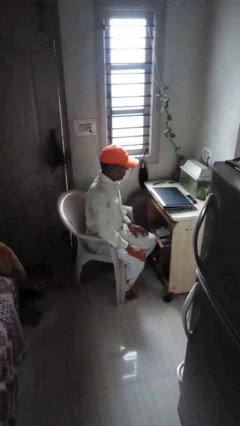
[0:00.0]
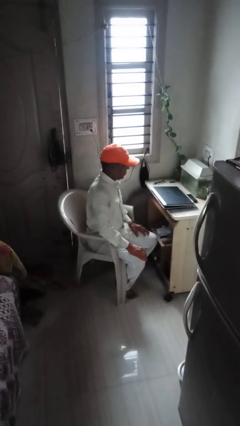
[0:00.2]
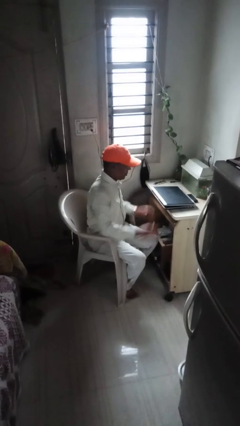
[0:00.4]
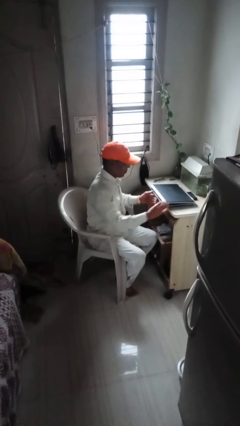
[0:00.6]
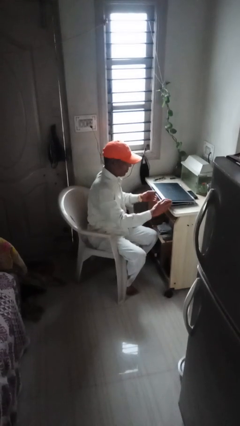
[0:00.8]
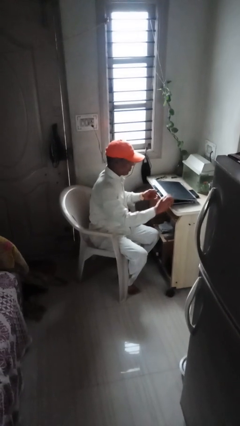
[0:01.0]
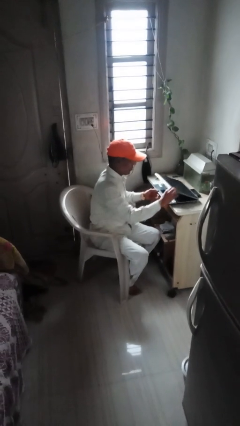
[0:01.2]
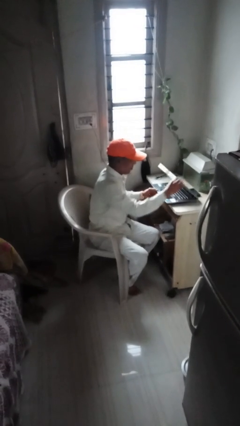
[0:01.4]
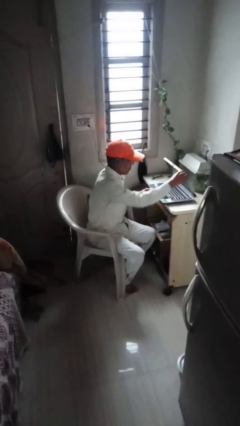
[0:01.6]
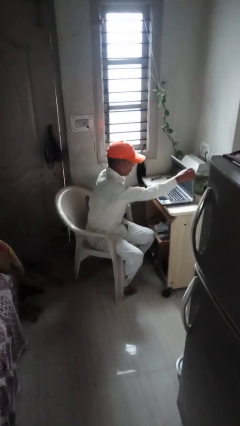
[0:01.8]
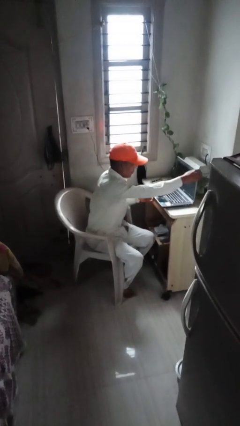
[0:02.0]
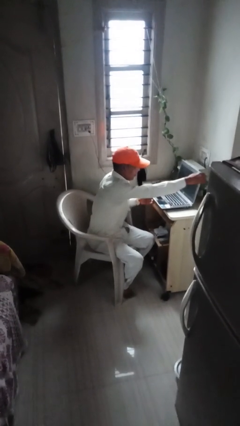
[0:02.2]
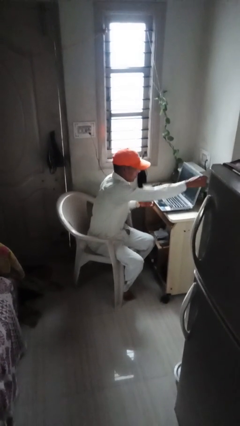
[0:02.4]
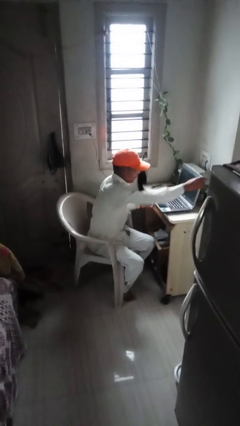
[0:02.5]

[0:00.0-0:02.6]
person opens laptop

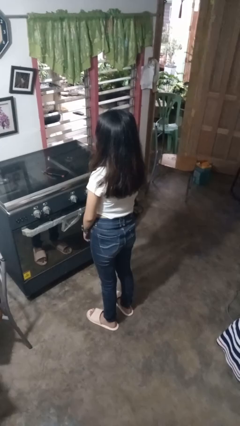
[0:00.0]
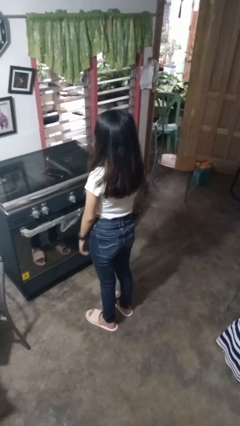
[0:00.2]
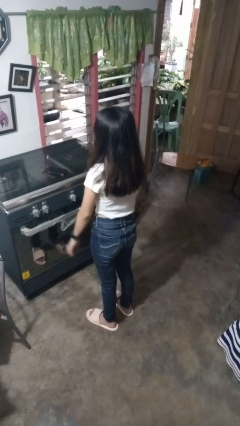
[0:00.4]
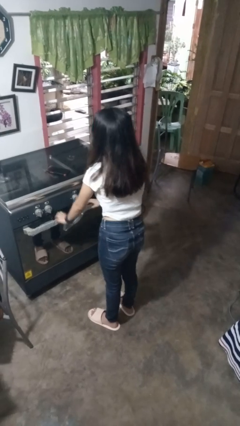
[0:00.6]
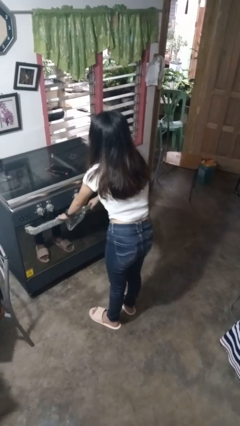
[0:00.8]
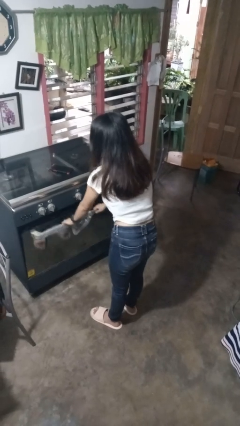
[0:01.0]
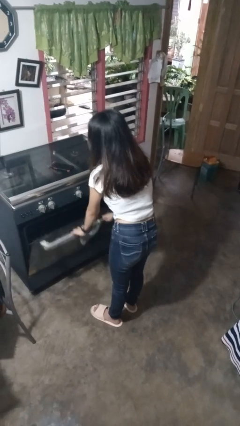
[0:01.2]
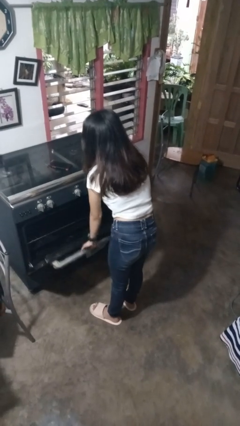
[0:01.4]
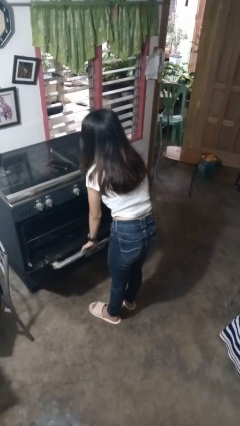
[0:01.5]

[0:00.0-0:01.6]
person opens oven door

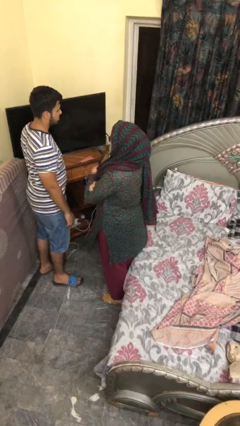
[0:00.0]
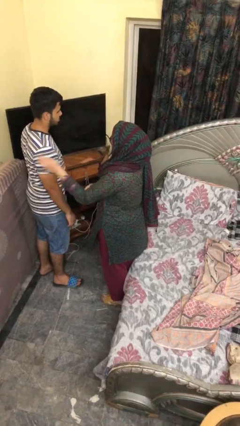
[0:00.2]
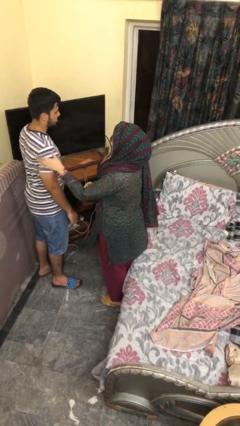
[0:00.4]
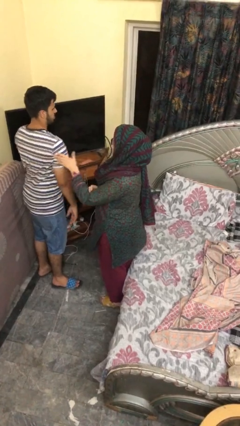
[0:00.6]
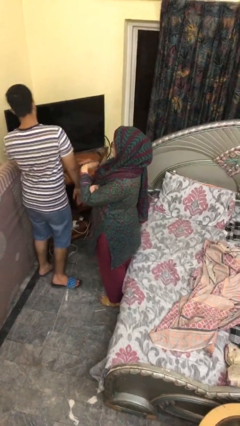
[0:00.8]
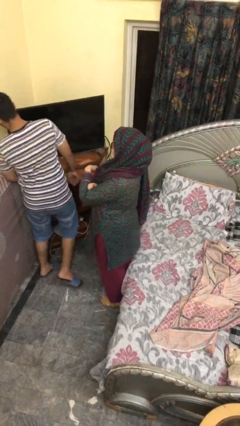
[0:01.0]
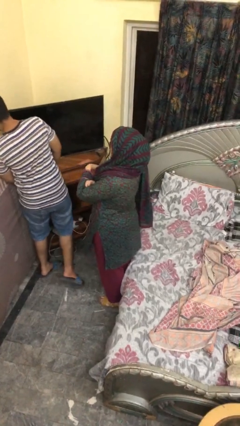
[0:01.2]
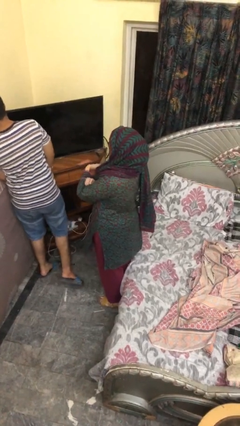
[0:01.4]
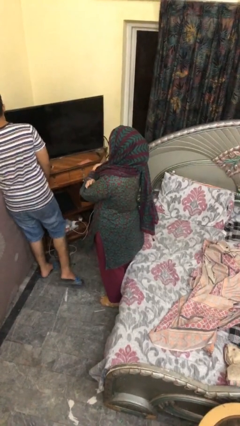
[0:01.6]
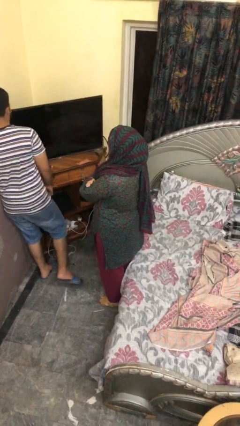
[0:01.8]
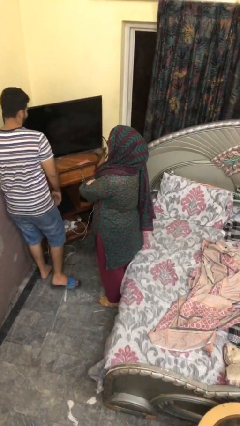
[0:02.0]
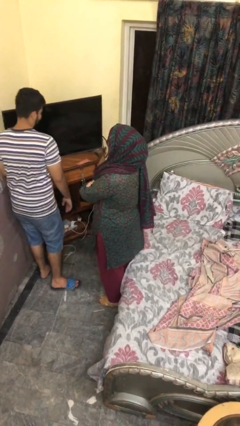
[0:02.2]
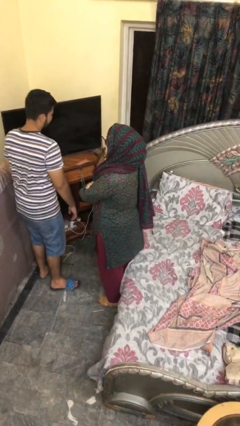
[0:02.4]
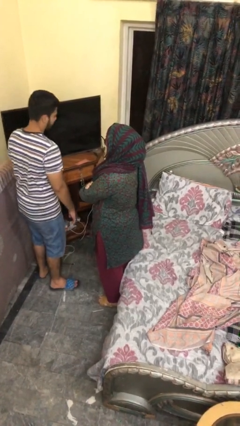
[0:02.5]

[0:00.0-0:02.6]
person shoves person

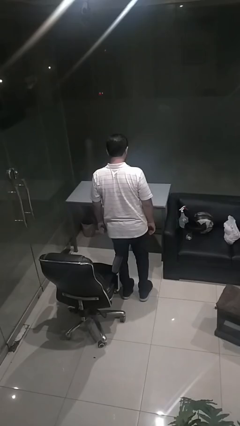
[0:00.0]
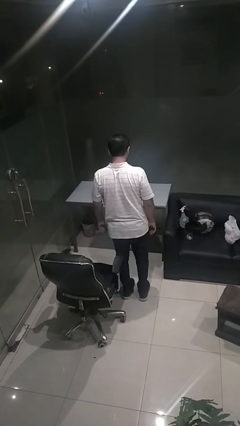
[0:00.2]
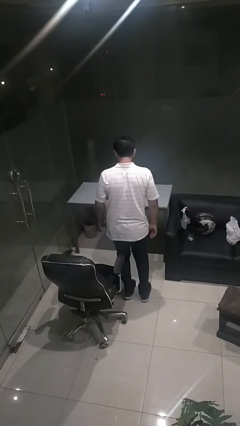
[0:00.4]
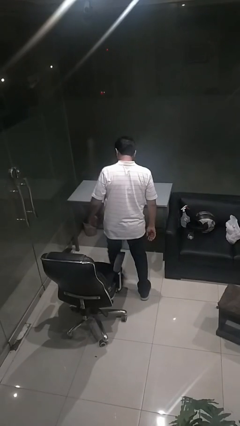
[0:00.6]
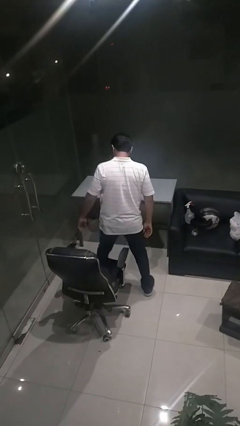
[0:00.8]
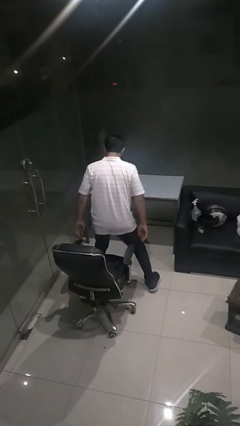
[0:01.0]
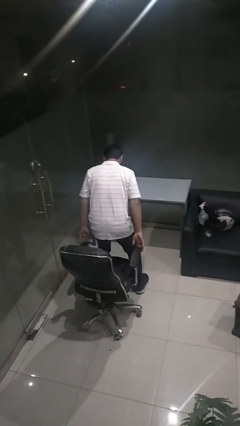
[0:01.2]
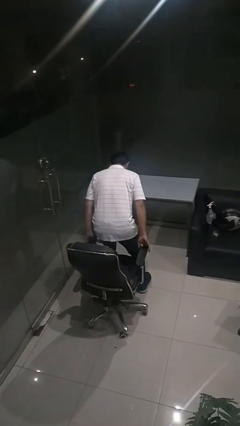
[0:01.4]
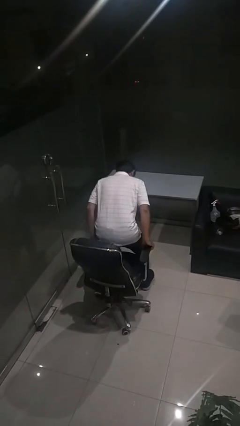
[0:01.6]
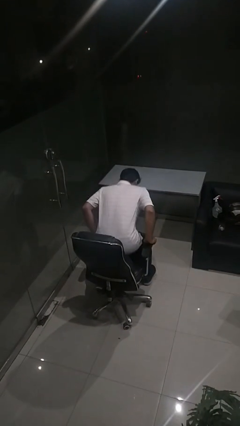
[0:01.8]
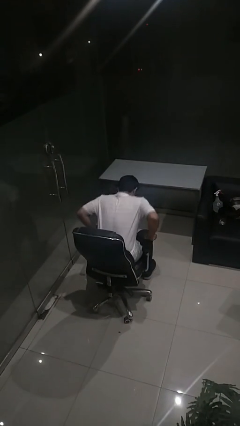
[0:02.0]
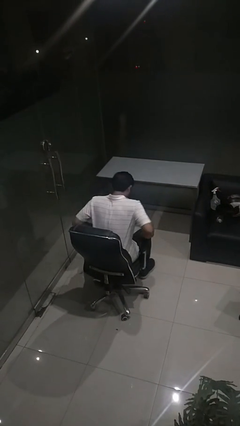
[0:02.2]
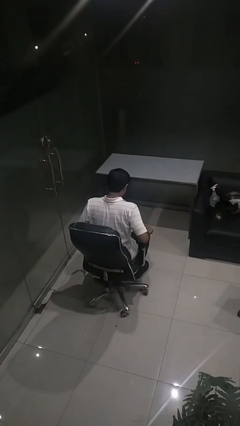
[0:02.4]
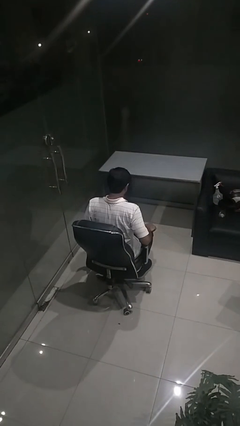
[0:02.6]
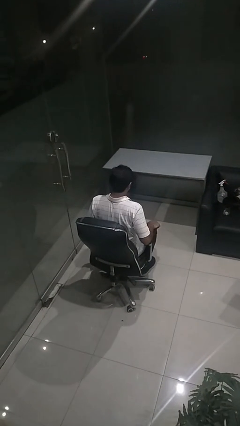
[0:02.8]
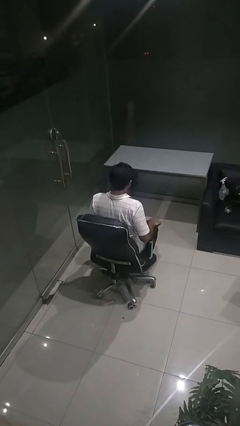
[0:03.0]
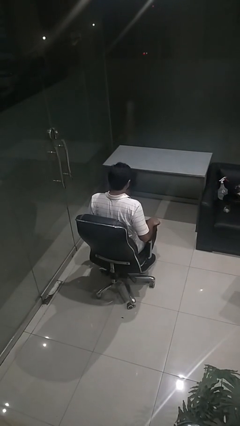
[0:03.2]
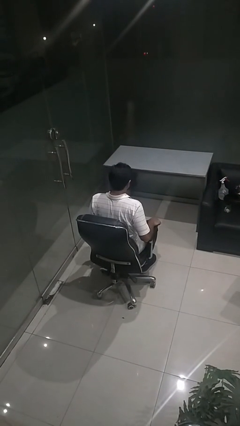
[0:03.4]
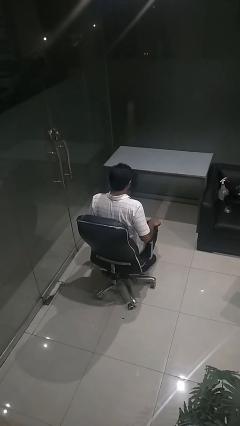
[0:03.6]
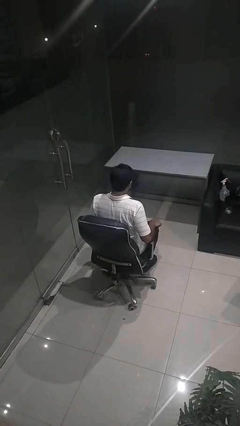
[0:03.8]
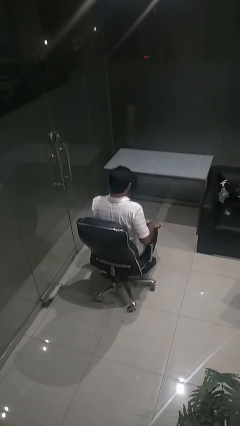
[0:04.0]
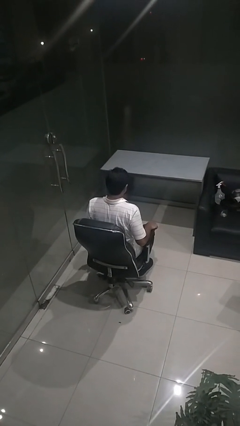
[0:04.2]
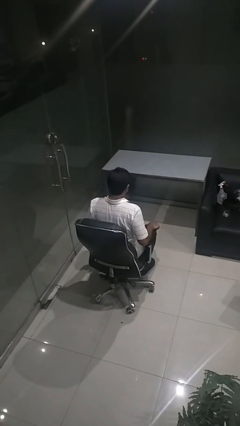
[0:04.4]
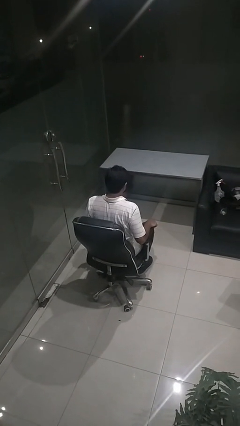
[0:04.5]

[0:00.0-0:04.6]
person sits down

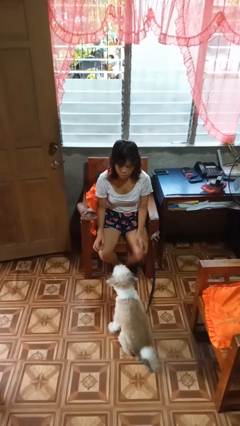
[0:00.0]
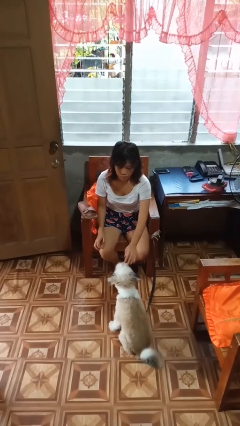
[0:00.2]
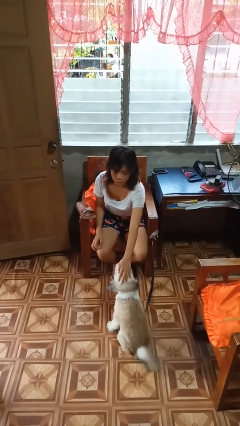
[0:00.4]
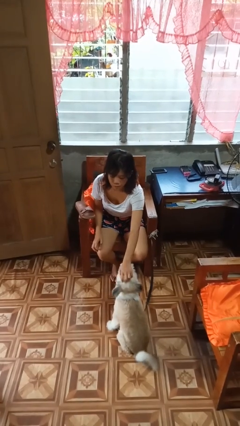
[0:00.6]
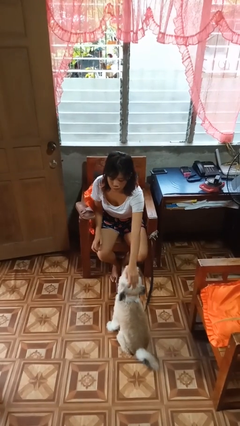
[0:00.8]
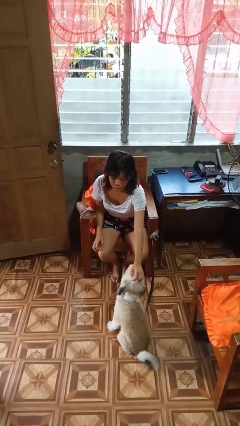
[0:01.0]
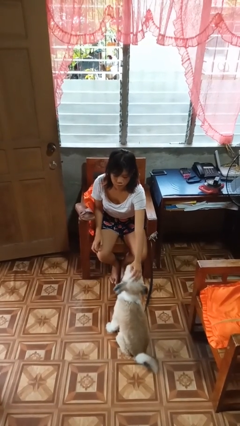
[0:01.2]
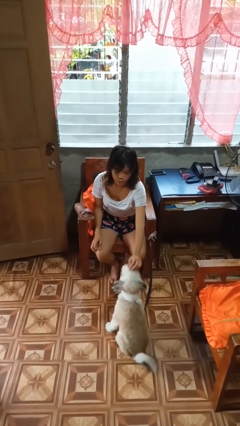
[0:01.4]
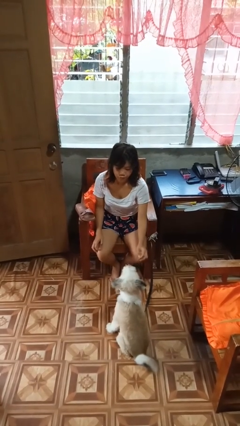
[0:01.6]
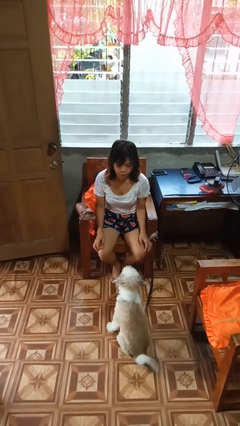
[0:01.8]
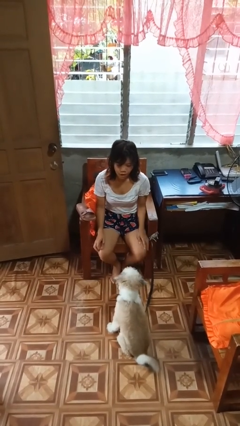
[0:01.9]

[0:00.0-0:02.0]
person pets dog

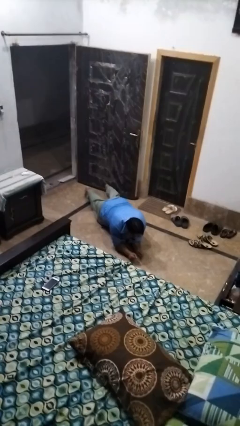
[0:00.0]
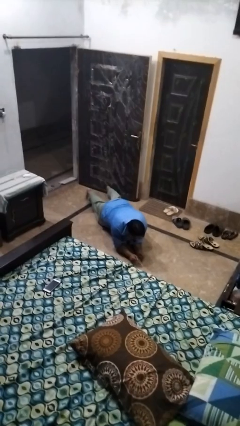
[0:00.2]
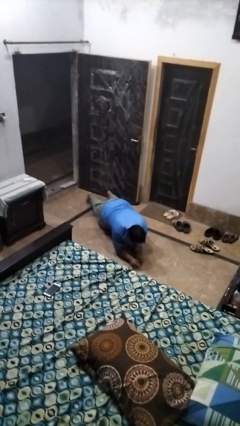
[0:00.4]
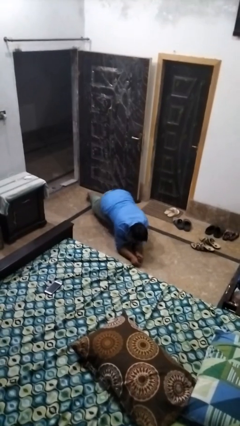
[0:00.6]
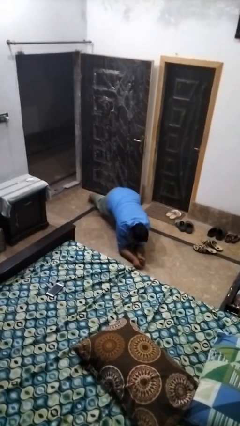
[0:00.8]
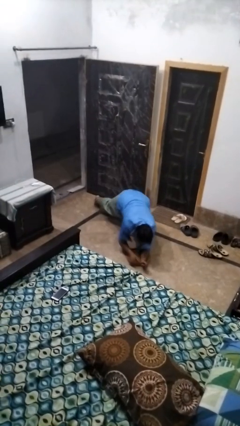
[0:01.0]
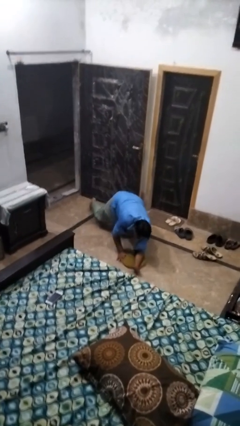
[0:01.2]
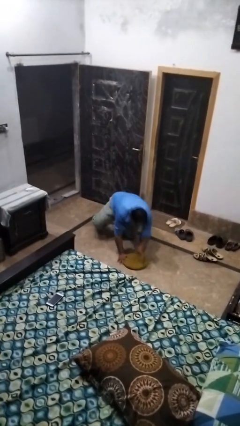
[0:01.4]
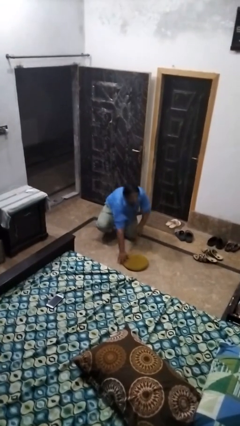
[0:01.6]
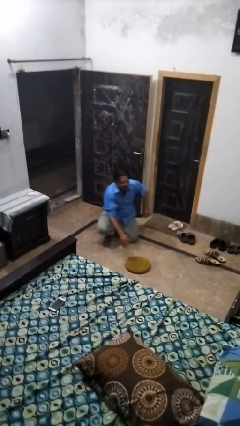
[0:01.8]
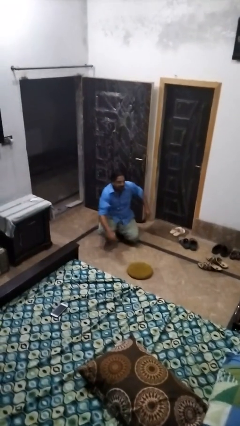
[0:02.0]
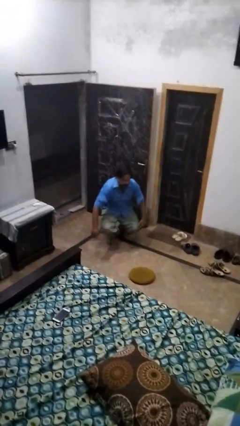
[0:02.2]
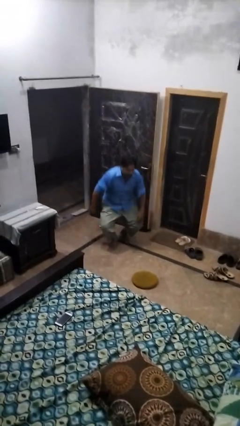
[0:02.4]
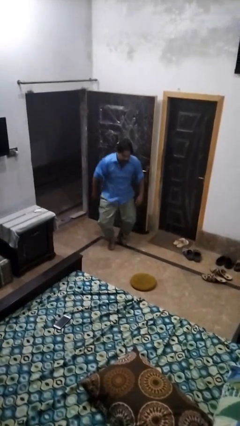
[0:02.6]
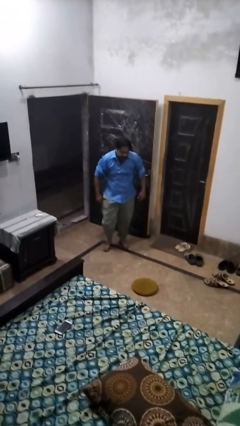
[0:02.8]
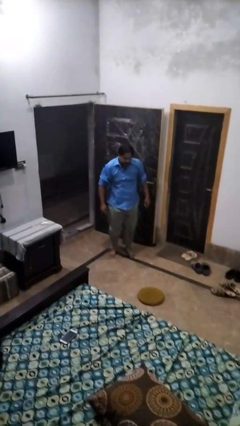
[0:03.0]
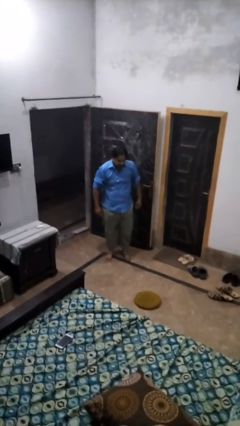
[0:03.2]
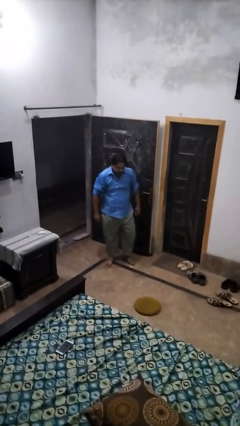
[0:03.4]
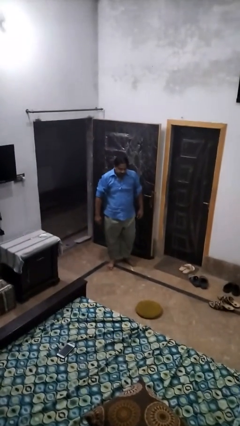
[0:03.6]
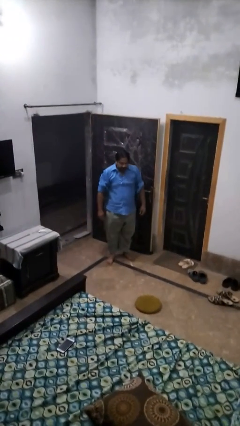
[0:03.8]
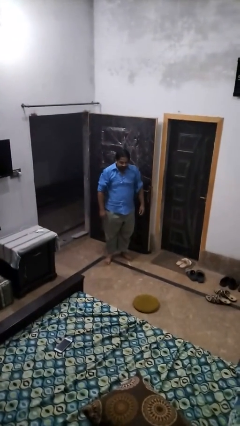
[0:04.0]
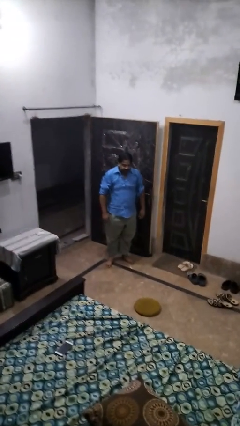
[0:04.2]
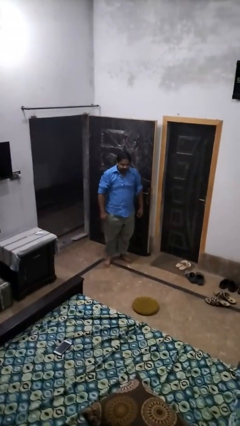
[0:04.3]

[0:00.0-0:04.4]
person stands up from floor
